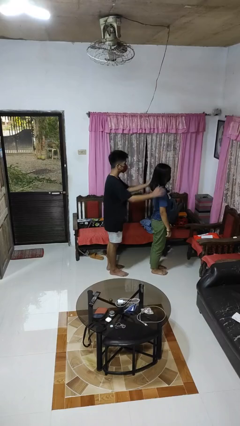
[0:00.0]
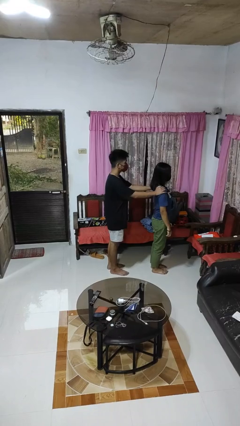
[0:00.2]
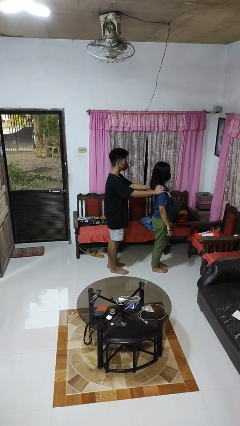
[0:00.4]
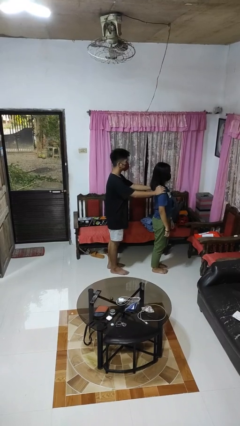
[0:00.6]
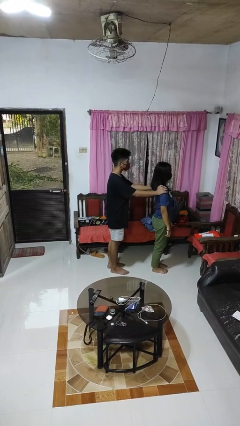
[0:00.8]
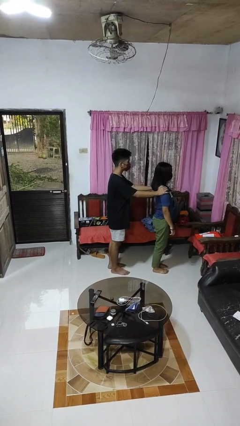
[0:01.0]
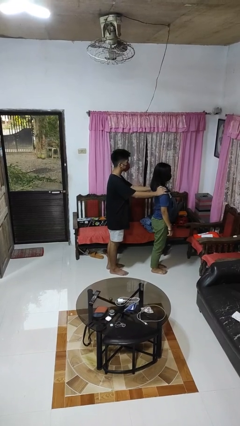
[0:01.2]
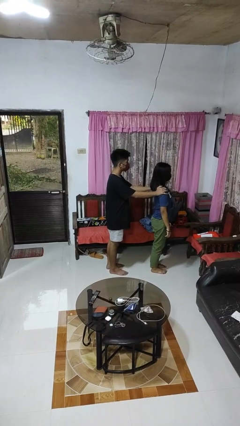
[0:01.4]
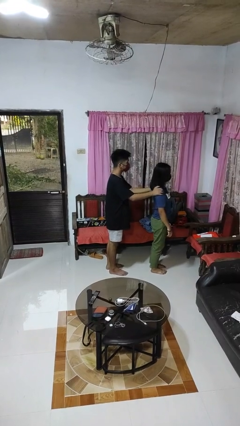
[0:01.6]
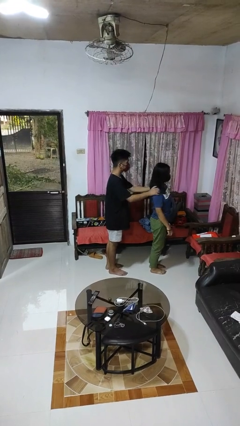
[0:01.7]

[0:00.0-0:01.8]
person grabs person by shoulder

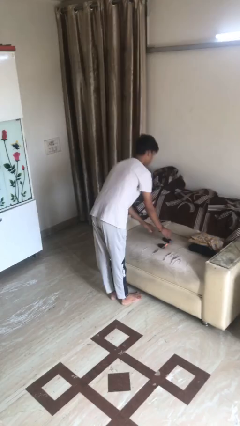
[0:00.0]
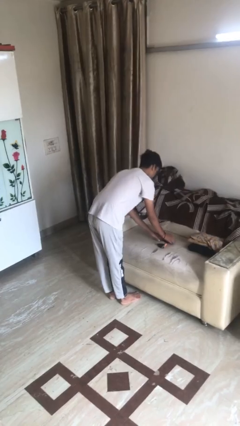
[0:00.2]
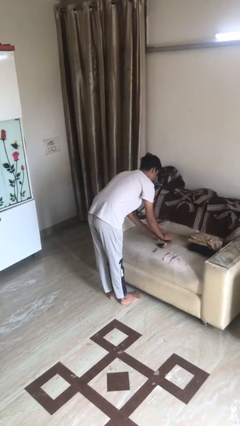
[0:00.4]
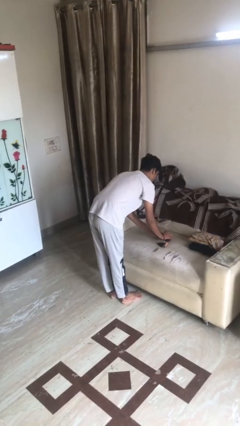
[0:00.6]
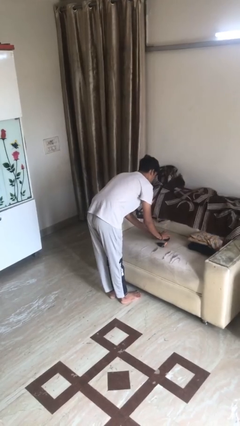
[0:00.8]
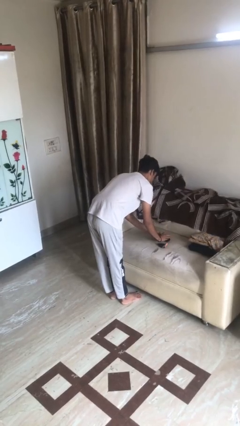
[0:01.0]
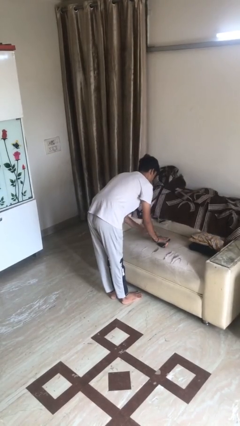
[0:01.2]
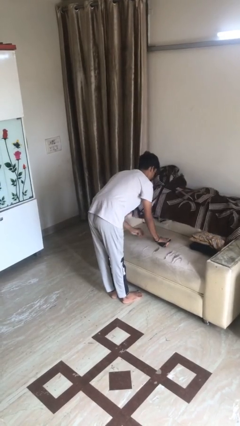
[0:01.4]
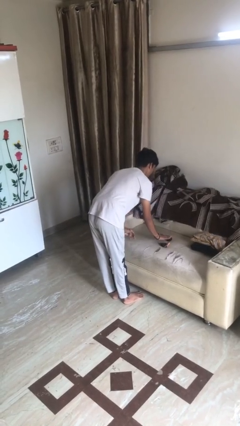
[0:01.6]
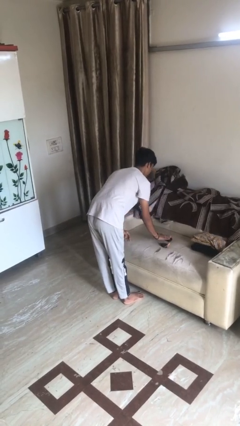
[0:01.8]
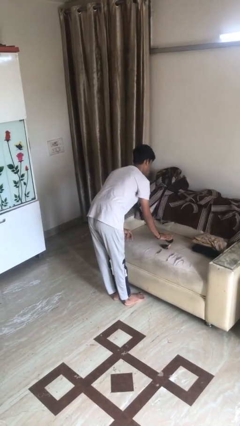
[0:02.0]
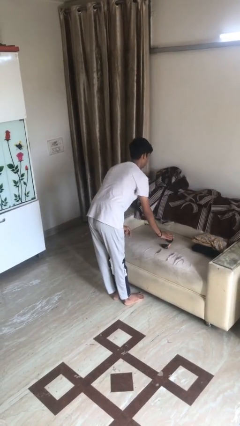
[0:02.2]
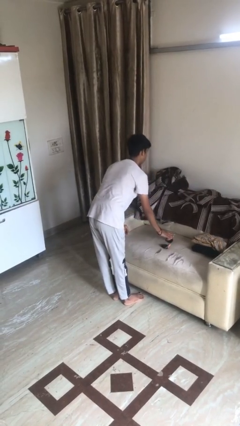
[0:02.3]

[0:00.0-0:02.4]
person folds socks

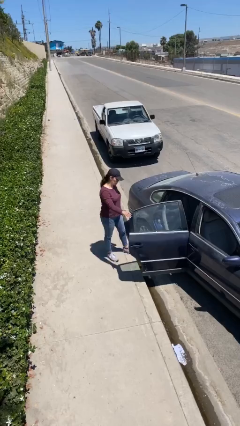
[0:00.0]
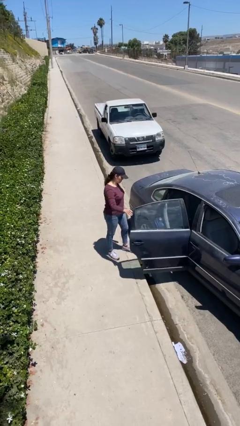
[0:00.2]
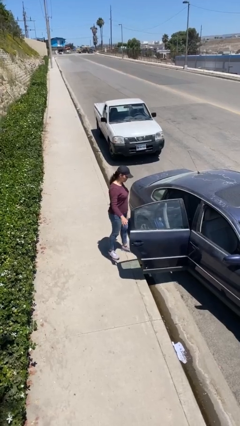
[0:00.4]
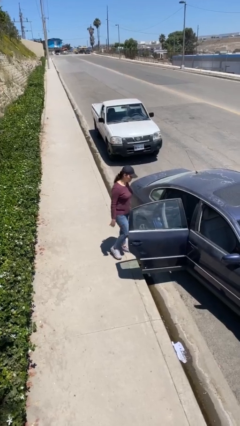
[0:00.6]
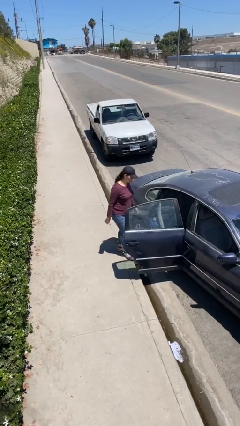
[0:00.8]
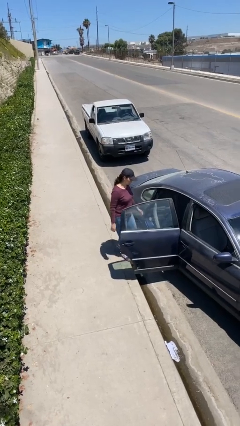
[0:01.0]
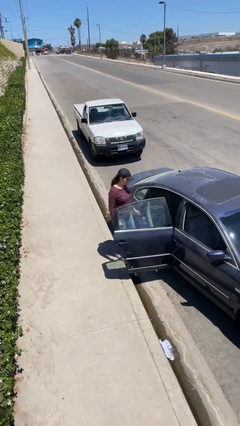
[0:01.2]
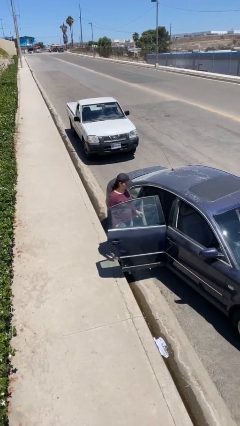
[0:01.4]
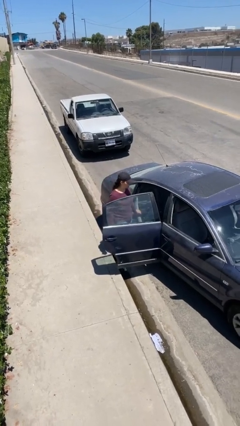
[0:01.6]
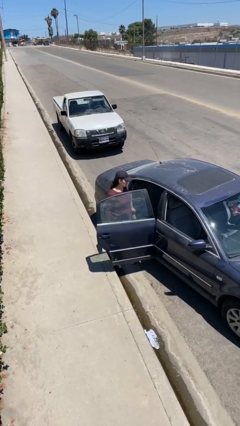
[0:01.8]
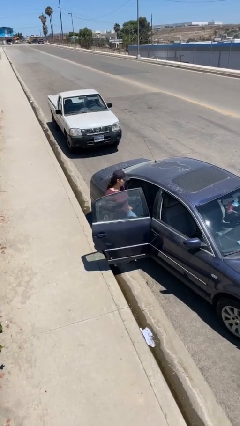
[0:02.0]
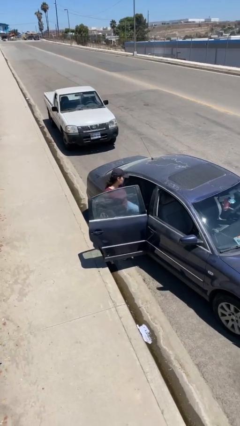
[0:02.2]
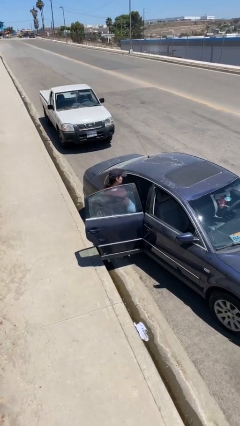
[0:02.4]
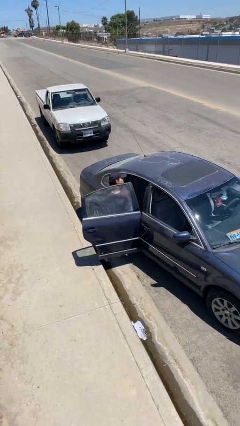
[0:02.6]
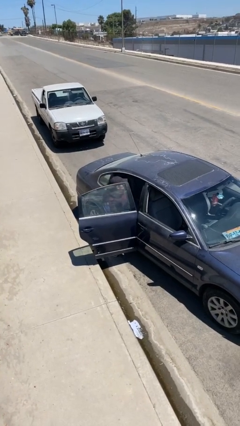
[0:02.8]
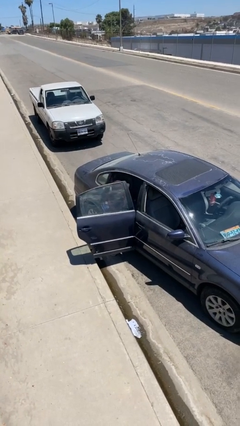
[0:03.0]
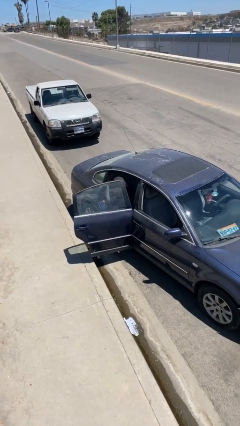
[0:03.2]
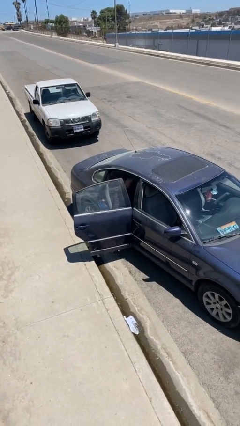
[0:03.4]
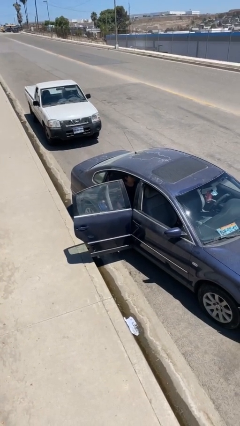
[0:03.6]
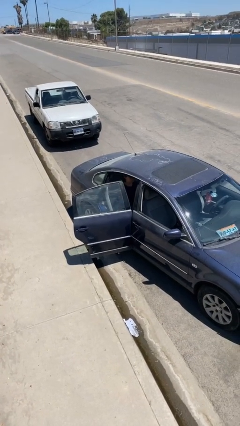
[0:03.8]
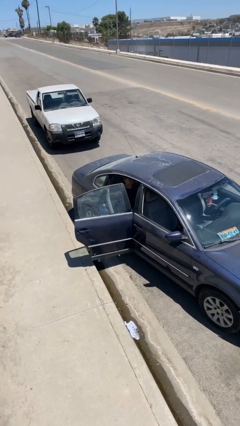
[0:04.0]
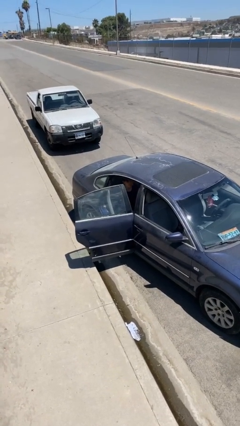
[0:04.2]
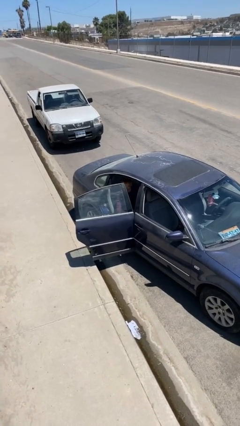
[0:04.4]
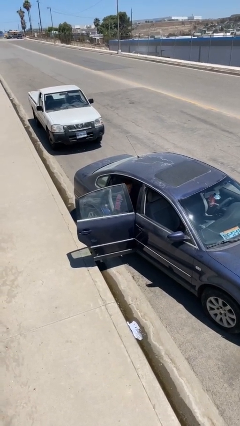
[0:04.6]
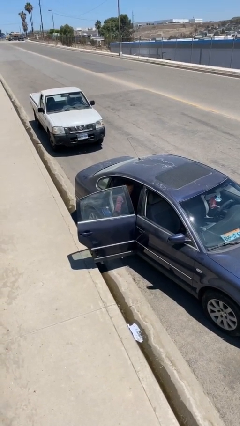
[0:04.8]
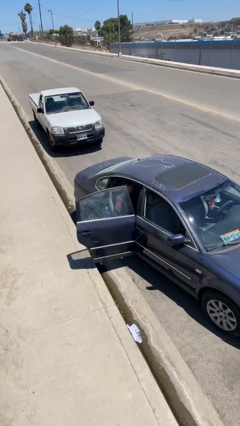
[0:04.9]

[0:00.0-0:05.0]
person enters car

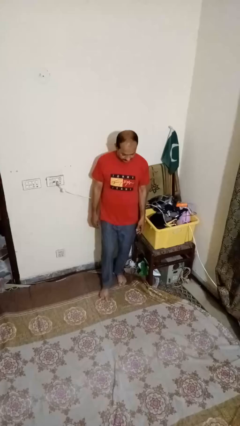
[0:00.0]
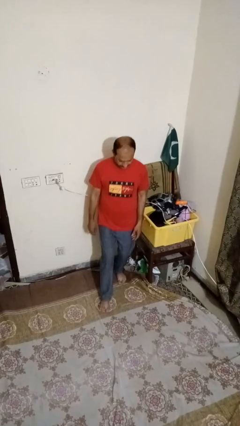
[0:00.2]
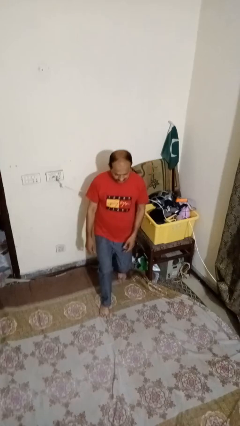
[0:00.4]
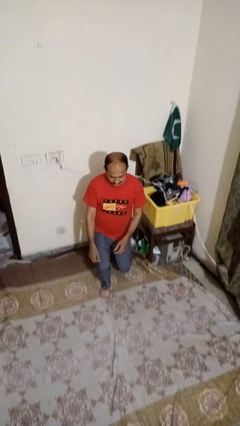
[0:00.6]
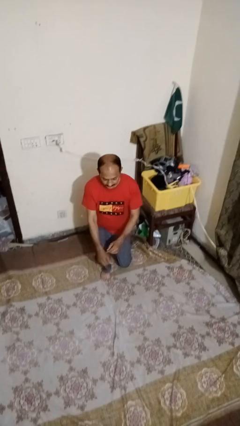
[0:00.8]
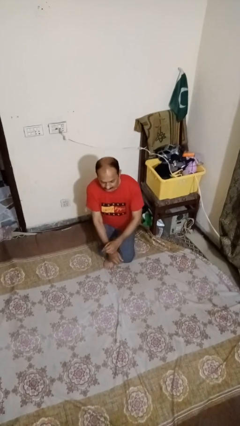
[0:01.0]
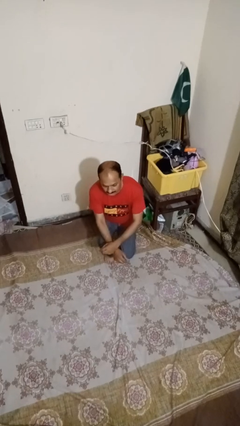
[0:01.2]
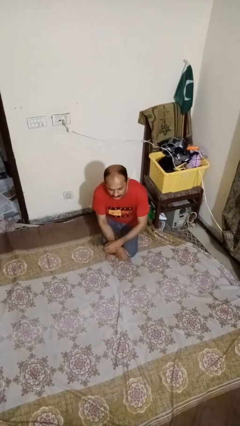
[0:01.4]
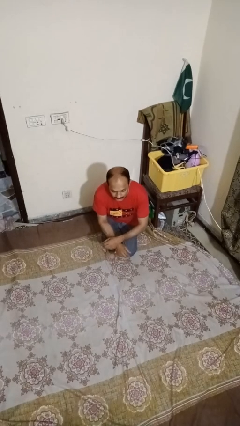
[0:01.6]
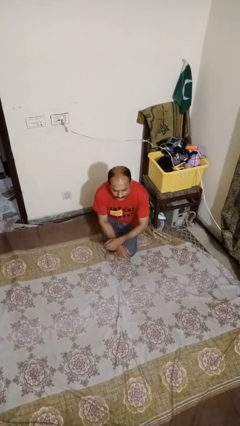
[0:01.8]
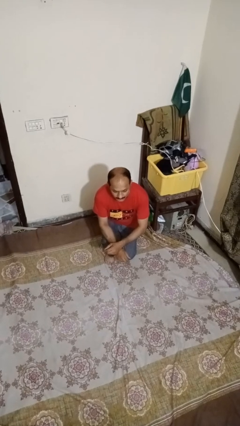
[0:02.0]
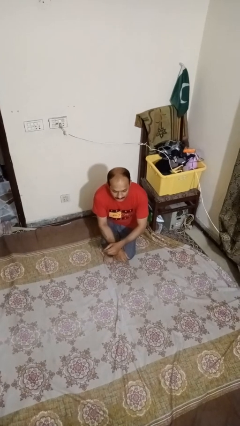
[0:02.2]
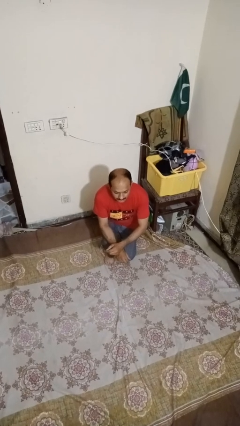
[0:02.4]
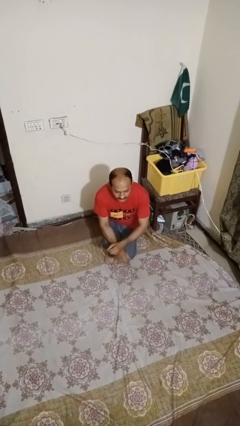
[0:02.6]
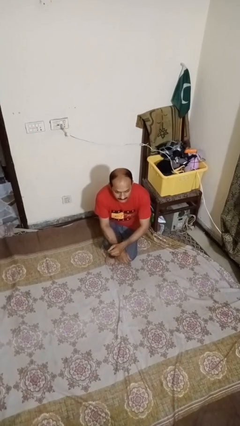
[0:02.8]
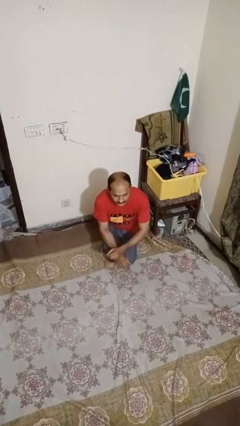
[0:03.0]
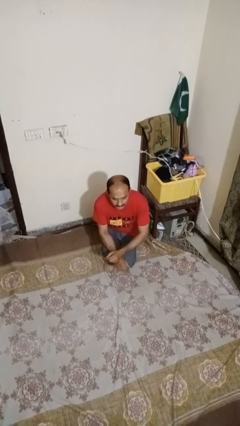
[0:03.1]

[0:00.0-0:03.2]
person exercises with lunges

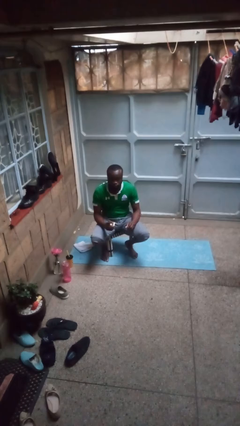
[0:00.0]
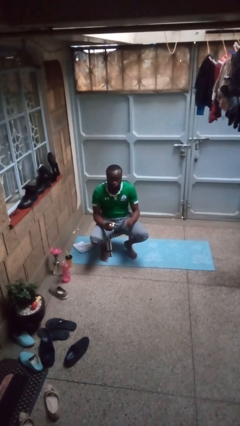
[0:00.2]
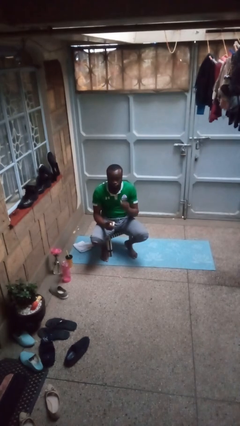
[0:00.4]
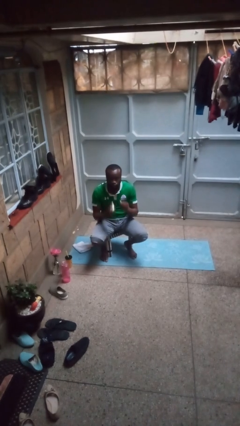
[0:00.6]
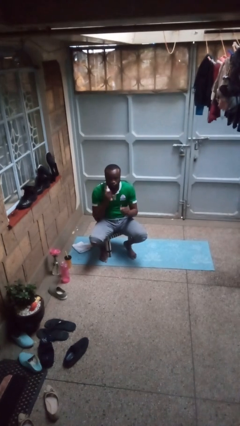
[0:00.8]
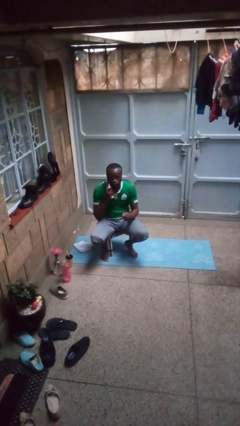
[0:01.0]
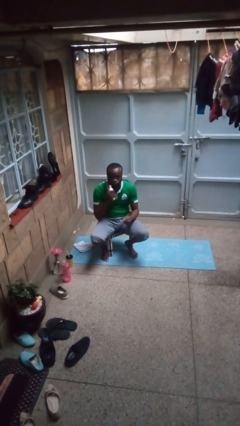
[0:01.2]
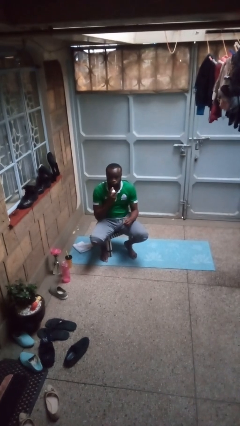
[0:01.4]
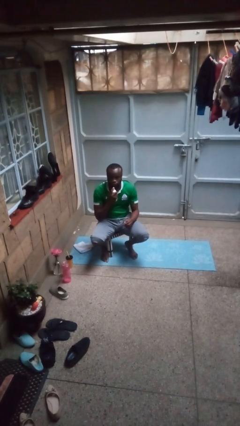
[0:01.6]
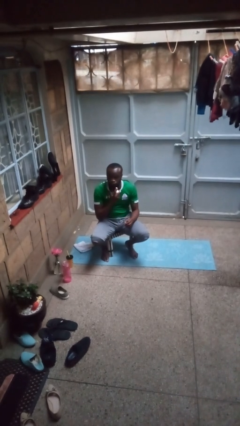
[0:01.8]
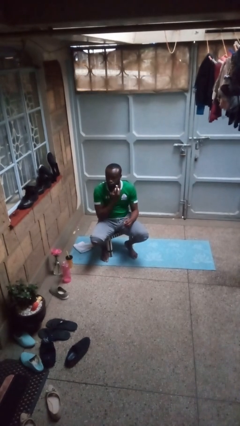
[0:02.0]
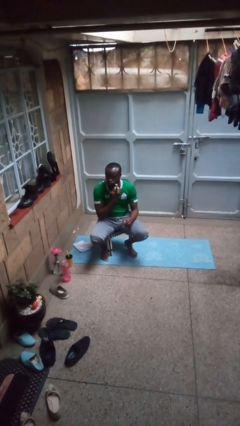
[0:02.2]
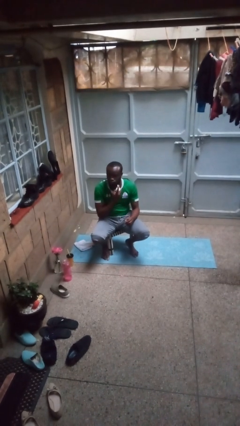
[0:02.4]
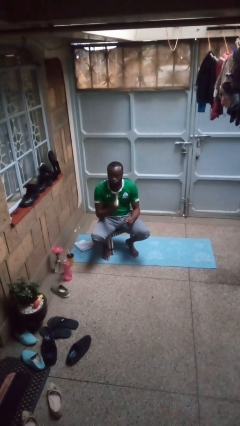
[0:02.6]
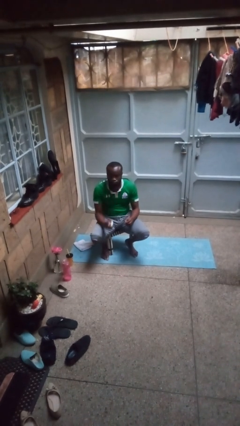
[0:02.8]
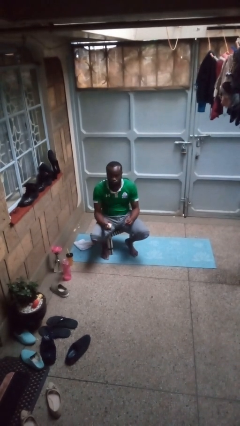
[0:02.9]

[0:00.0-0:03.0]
person applies shaving cream

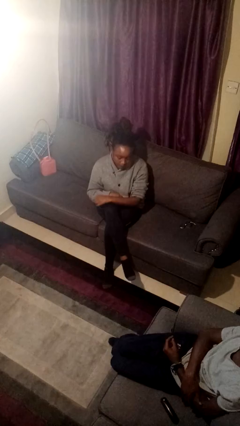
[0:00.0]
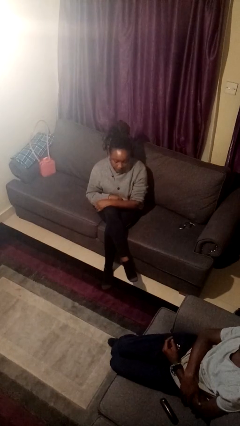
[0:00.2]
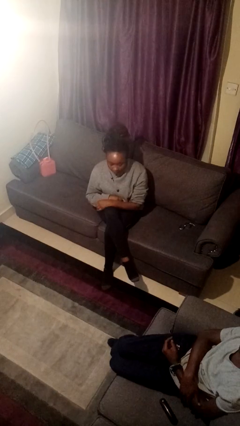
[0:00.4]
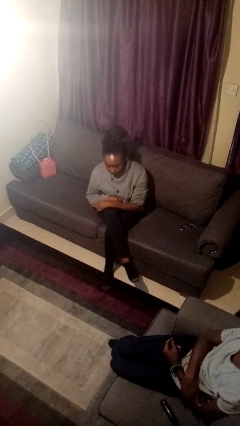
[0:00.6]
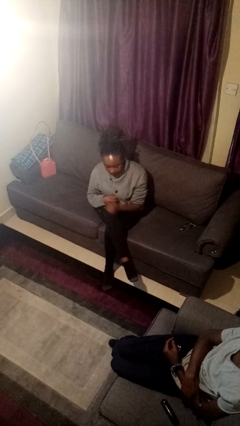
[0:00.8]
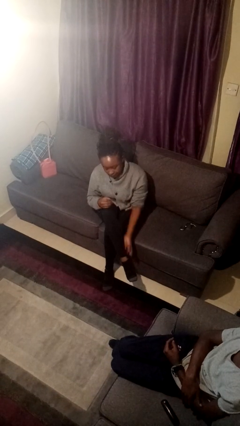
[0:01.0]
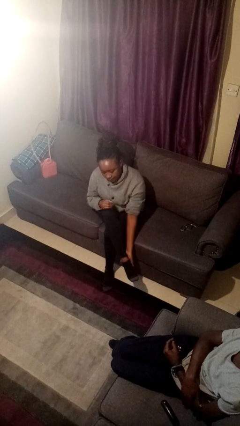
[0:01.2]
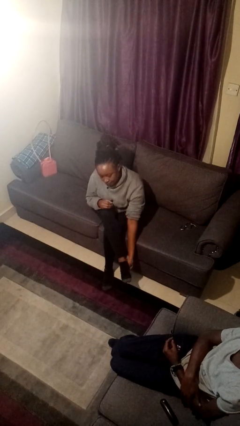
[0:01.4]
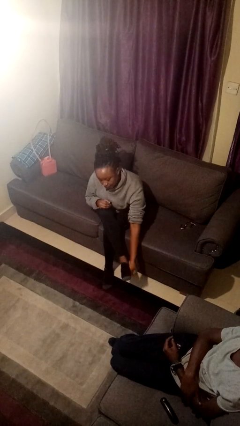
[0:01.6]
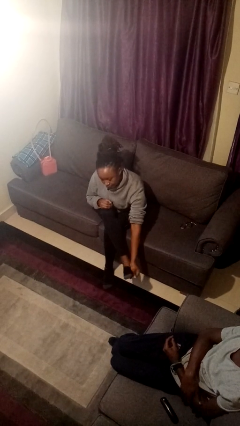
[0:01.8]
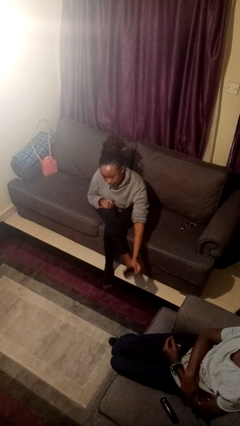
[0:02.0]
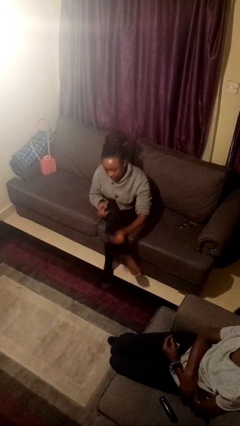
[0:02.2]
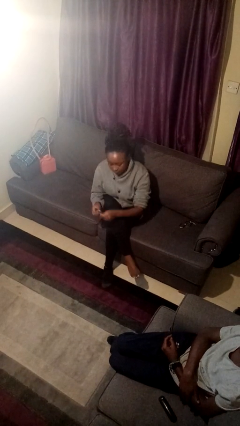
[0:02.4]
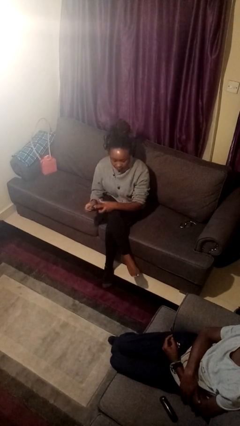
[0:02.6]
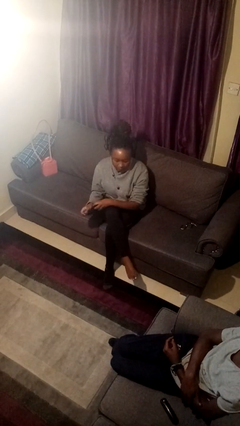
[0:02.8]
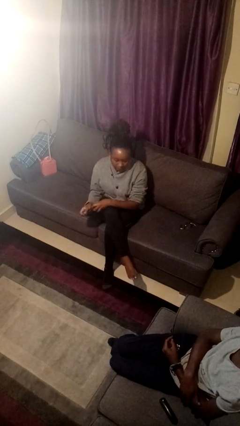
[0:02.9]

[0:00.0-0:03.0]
person takes off socks
